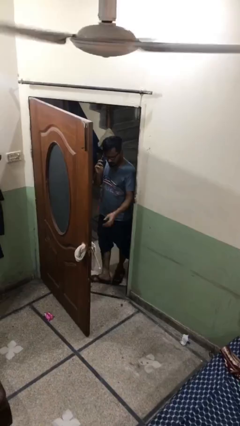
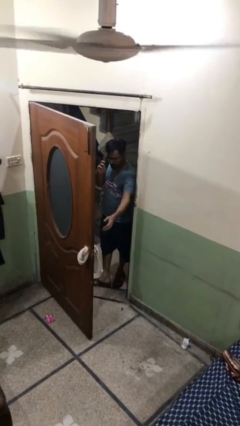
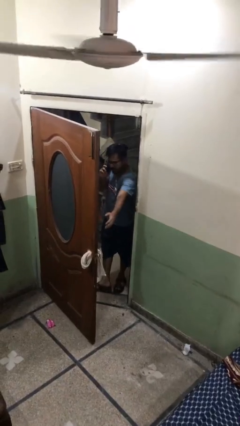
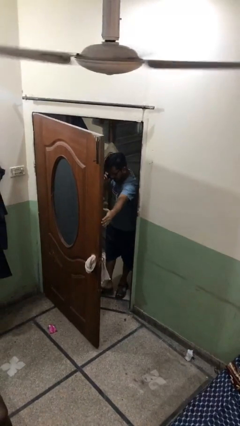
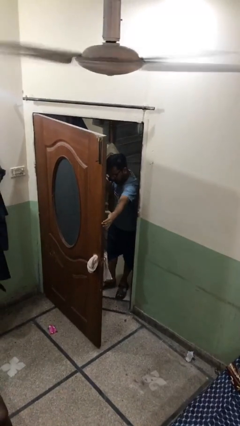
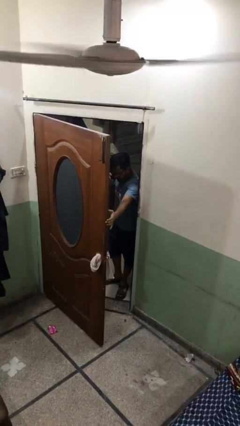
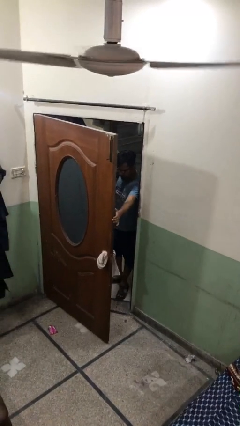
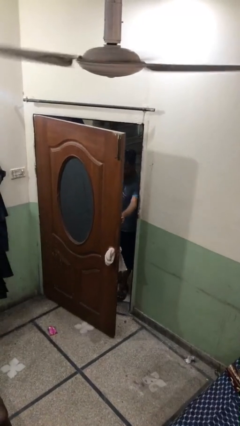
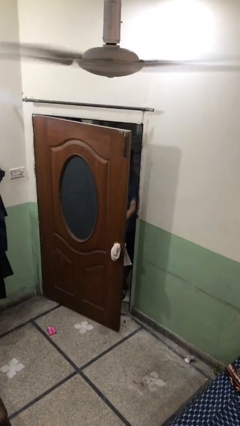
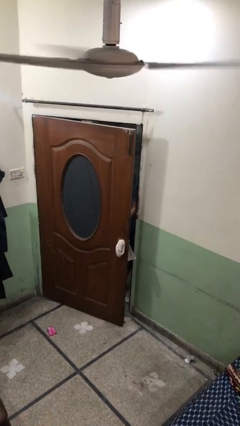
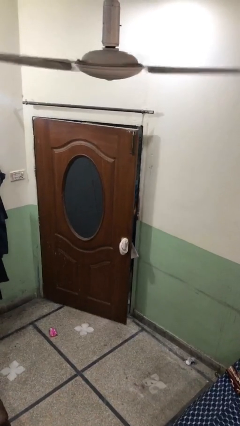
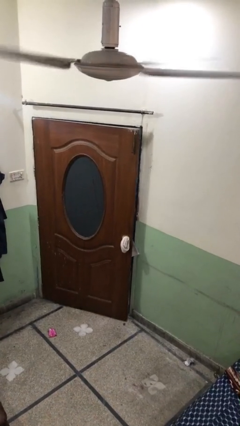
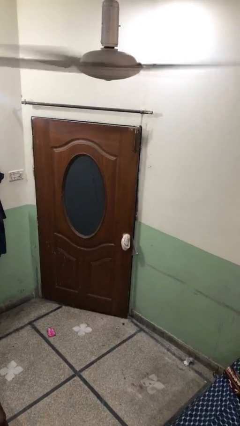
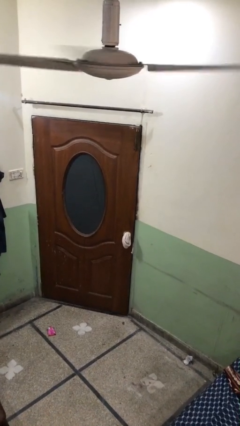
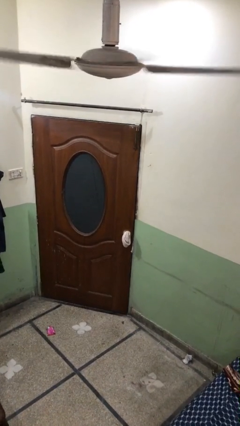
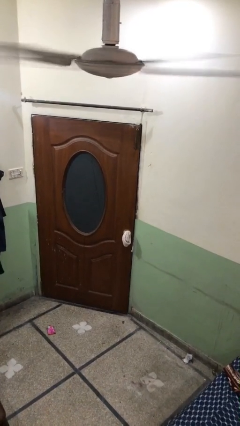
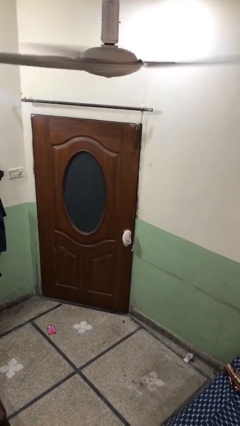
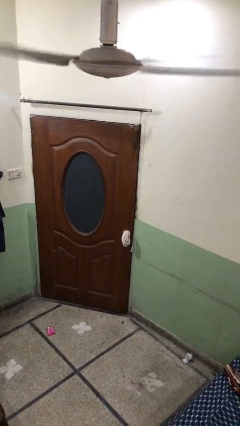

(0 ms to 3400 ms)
person closes facility door

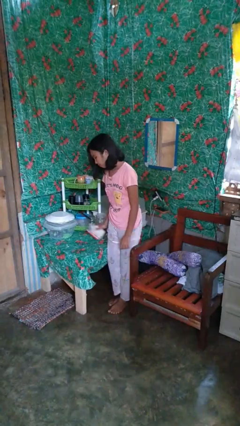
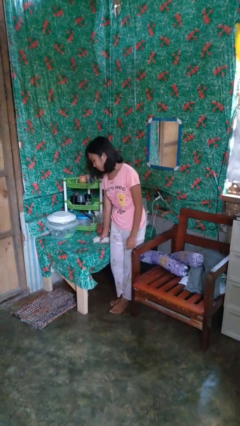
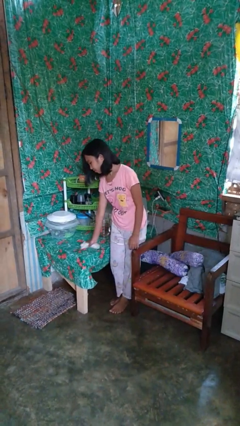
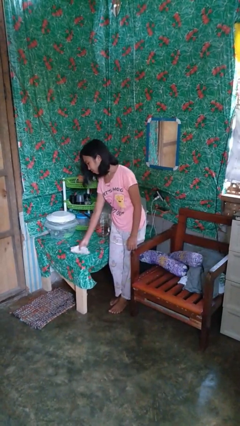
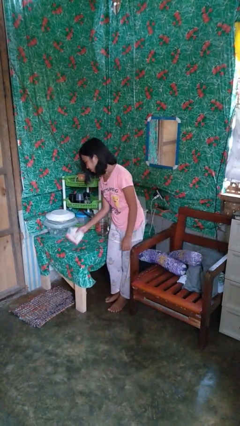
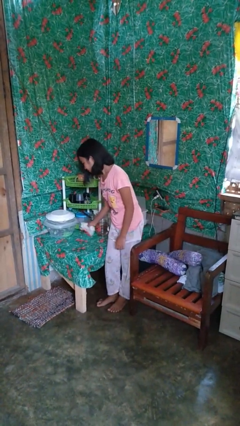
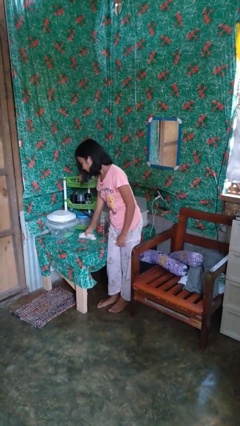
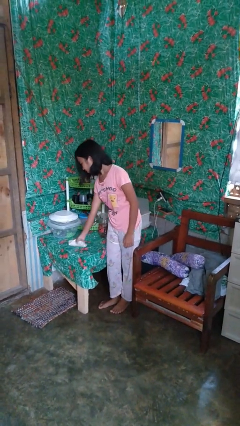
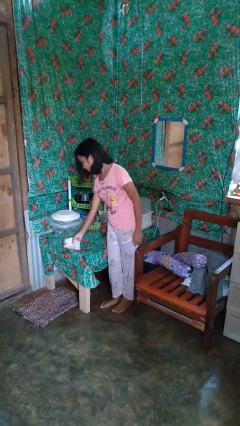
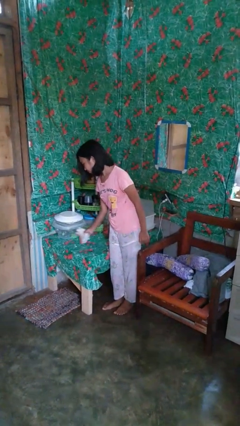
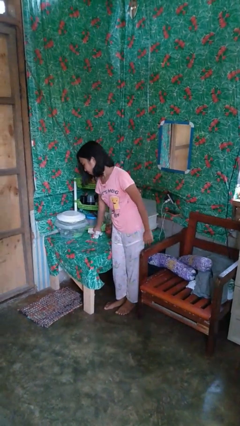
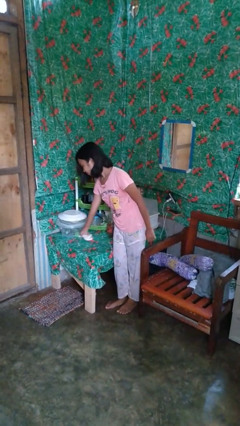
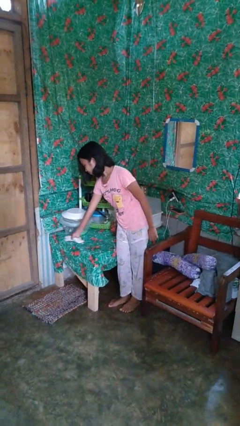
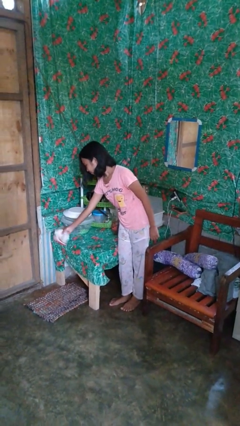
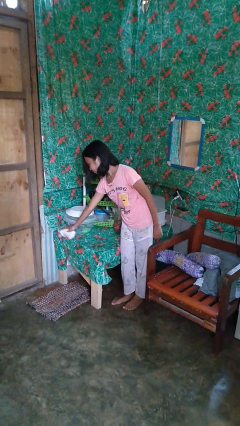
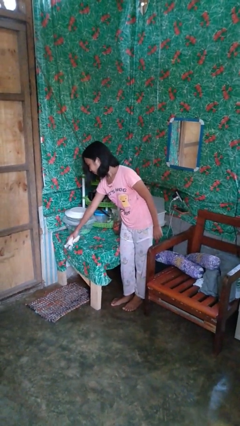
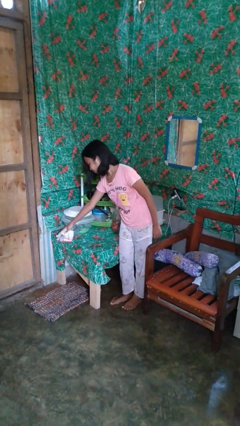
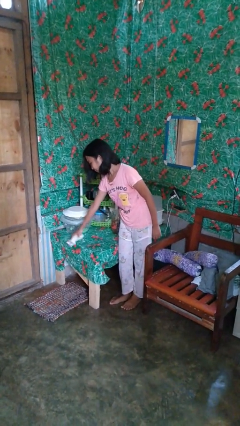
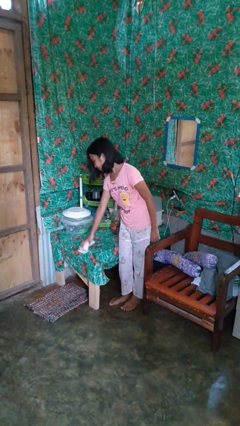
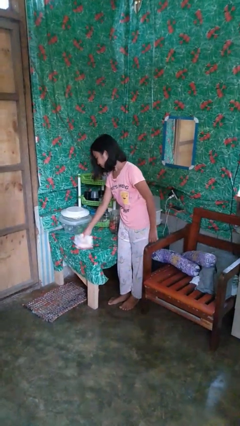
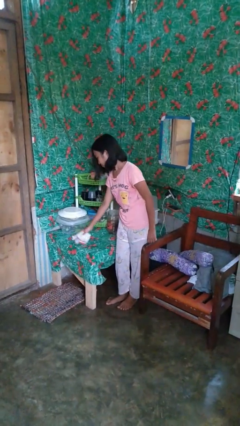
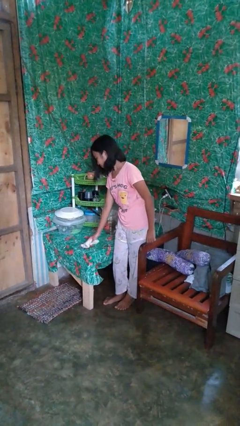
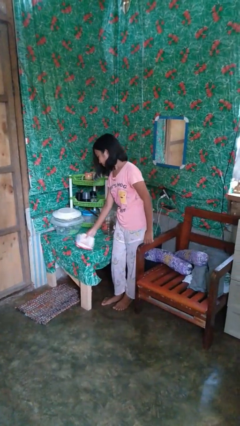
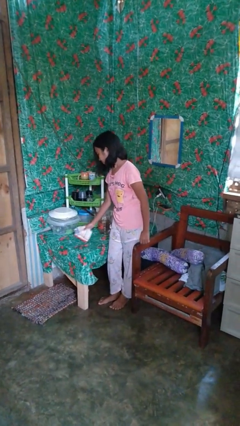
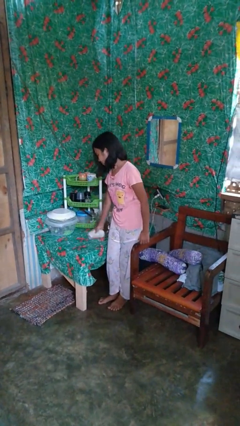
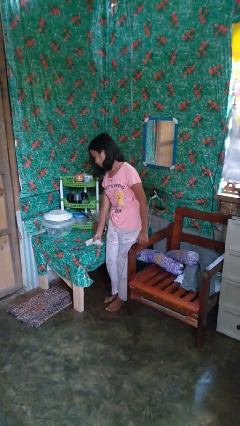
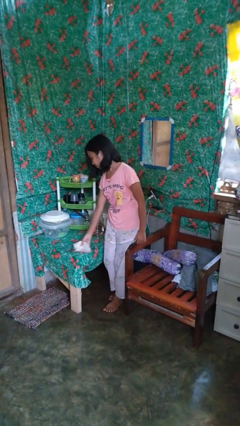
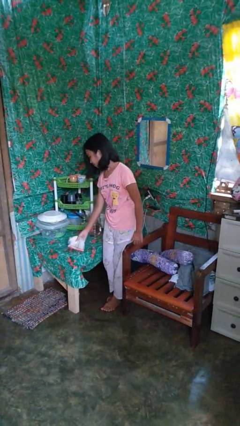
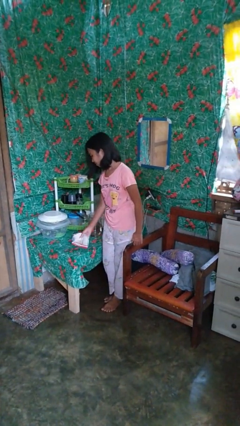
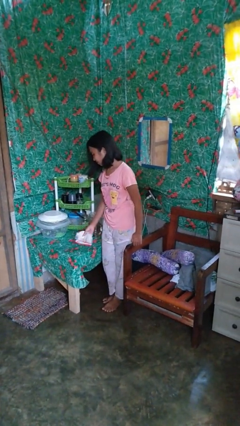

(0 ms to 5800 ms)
person cleans table with rag

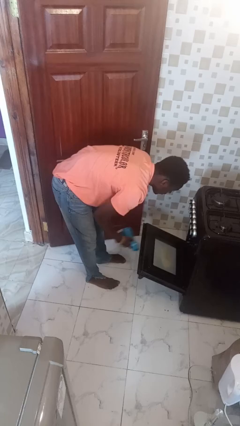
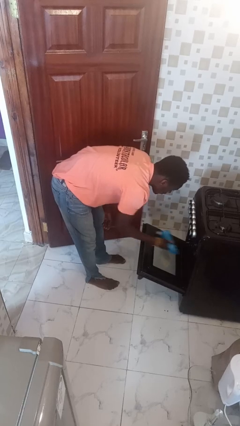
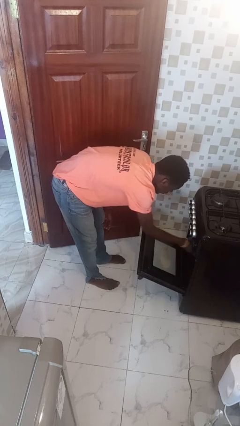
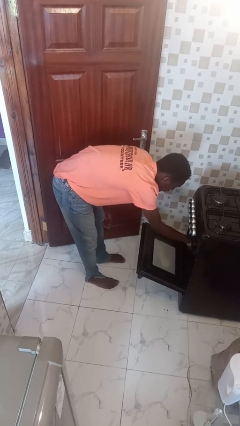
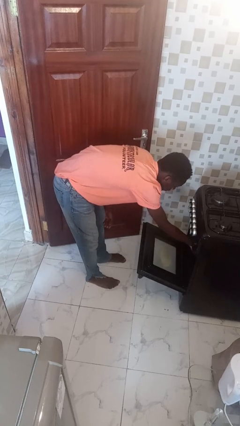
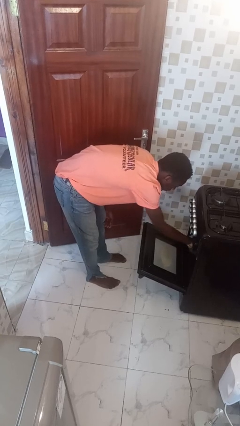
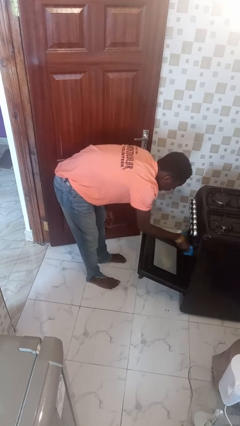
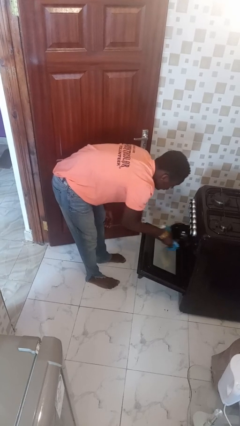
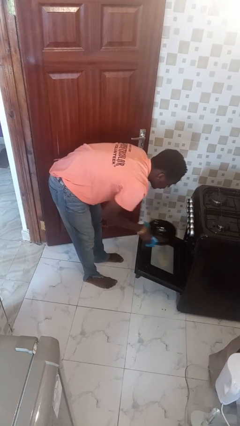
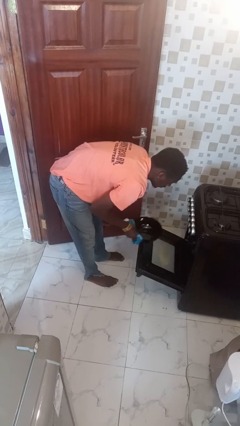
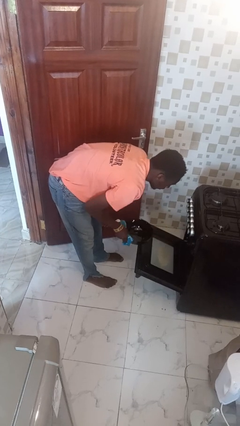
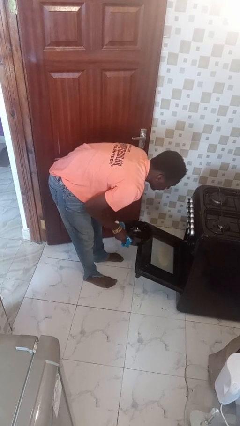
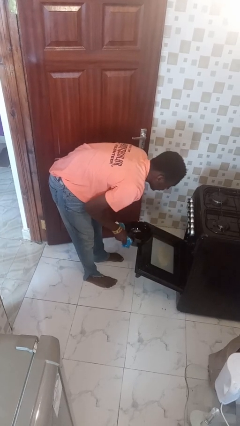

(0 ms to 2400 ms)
person takes object from oven

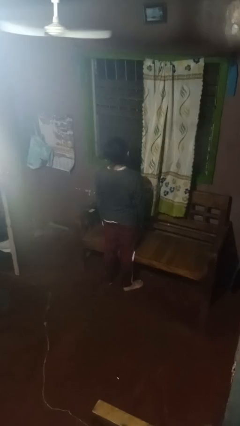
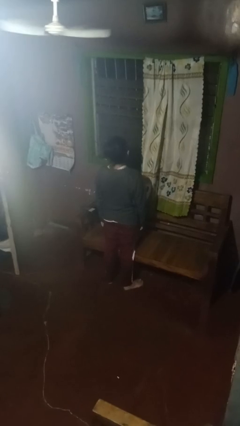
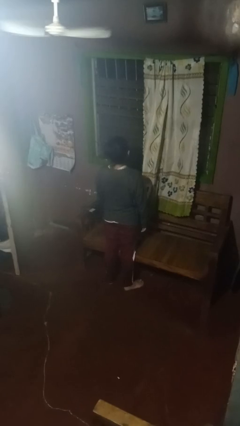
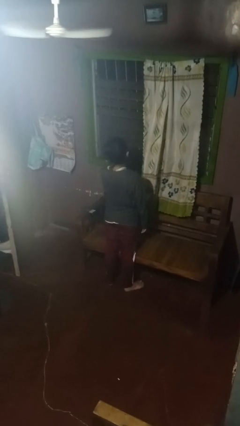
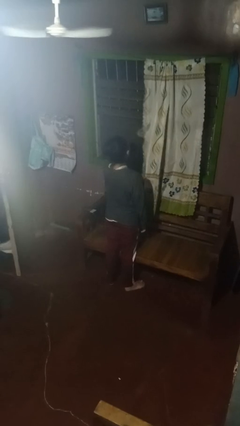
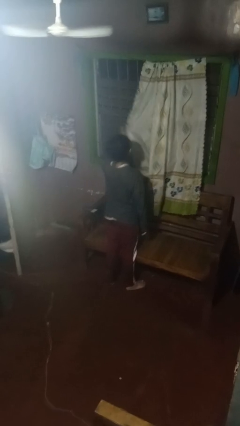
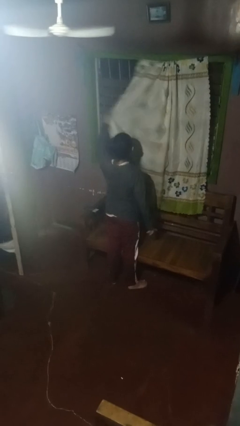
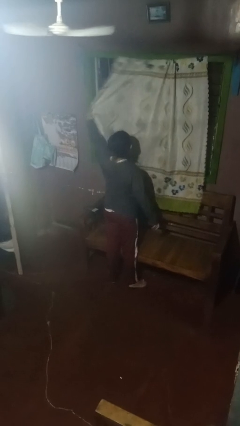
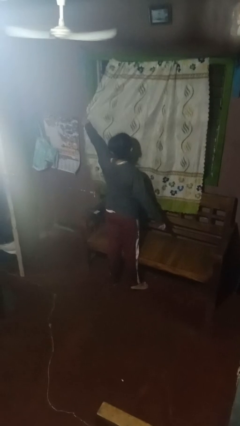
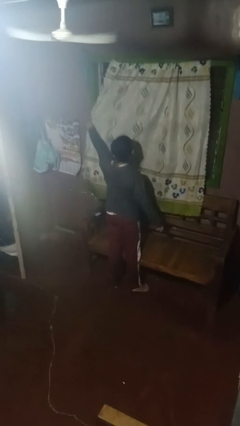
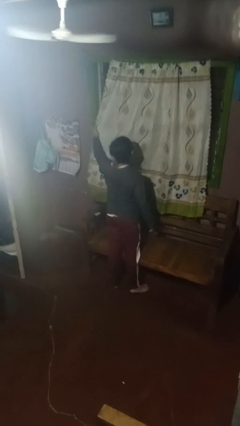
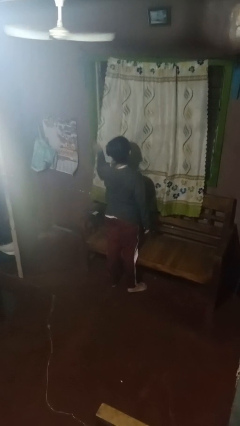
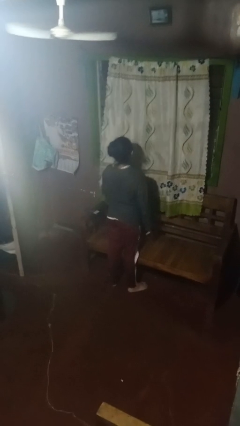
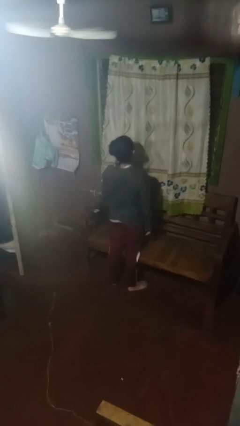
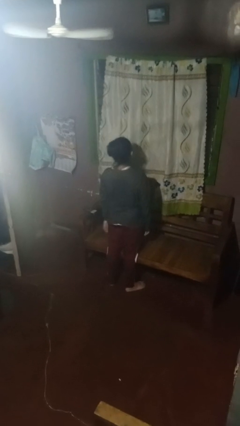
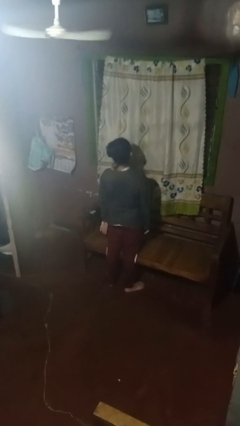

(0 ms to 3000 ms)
person closes curtains

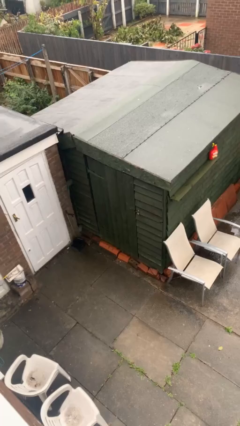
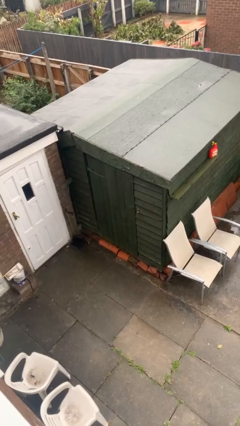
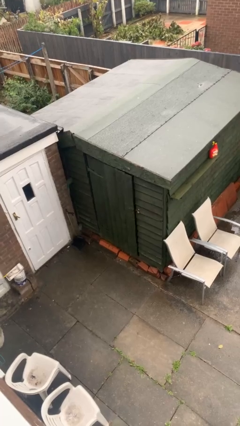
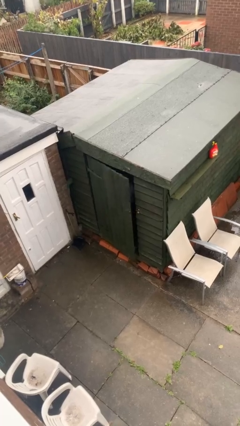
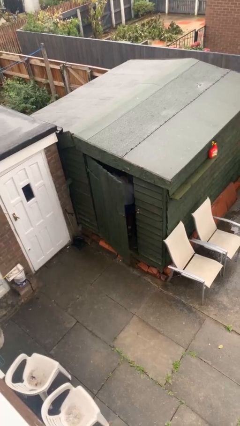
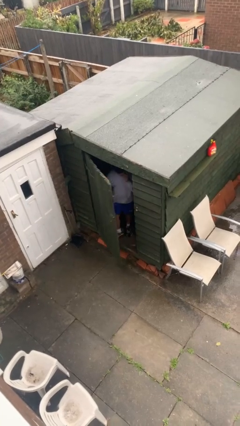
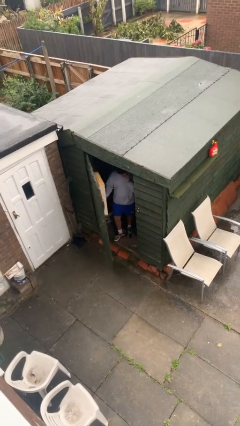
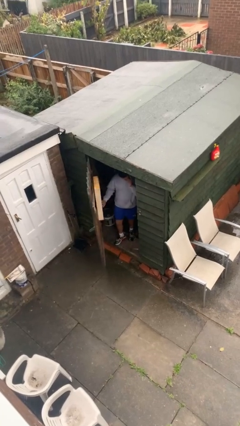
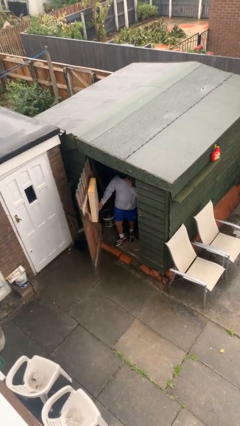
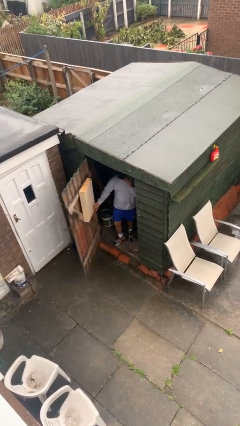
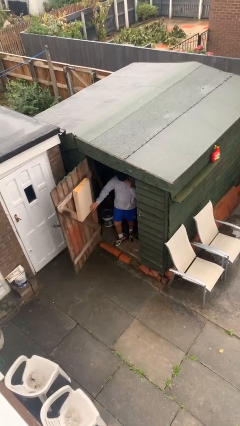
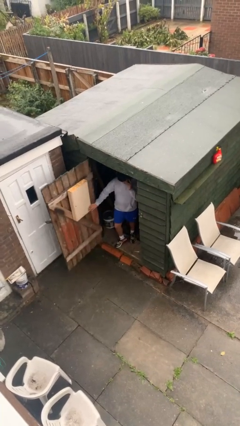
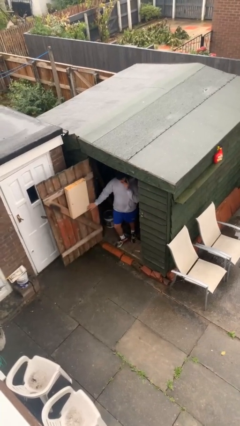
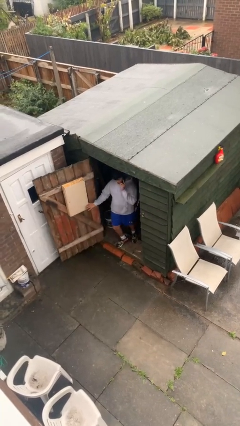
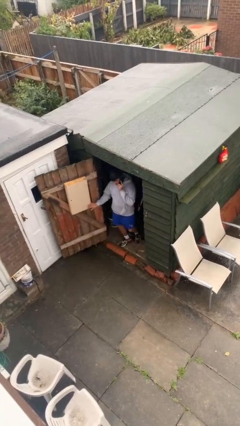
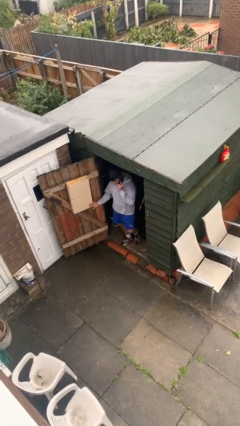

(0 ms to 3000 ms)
person opens facility door
